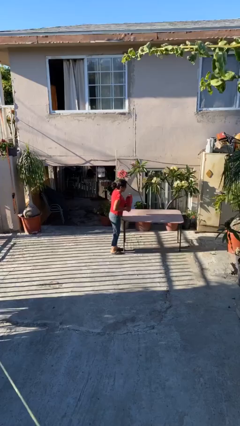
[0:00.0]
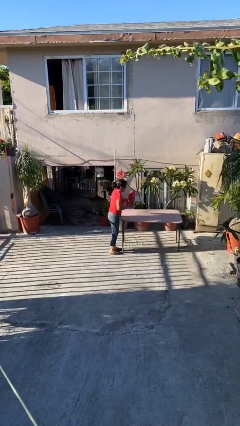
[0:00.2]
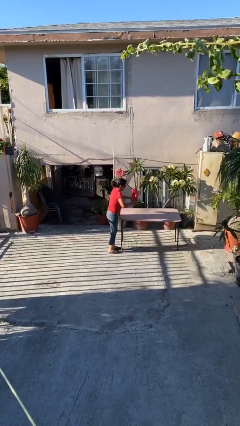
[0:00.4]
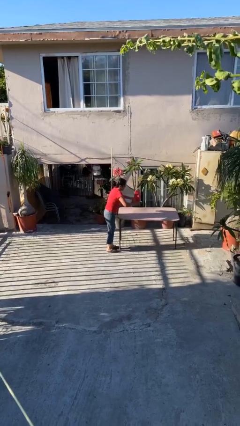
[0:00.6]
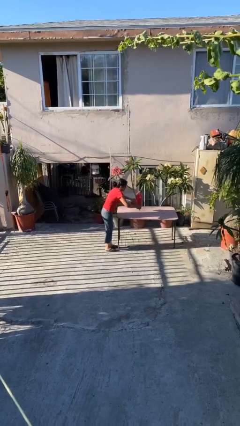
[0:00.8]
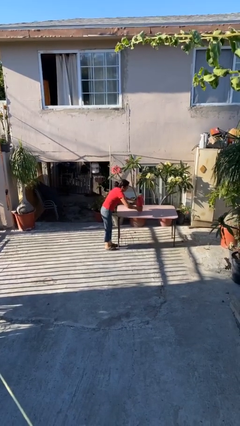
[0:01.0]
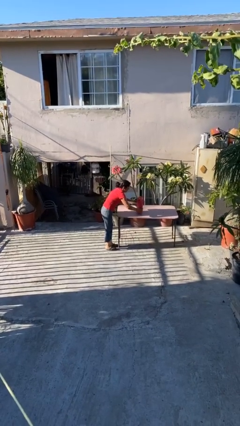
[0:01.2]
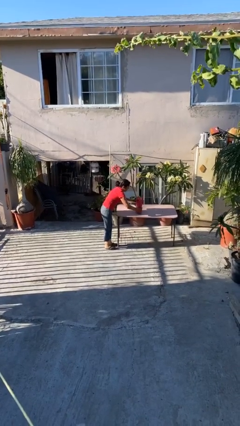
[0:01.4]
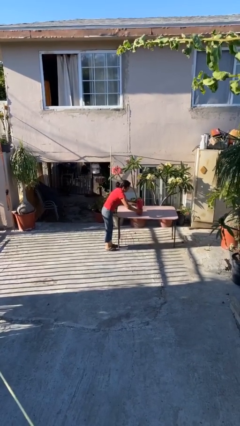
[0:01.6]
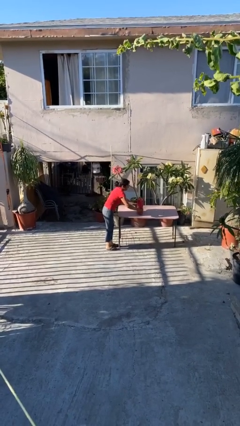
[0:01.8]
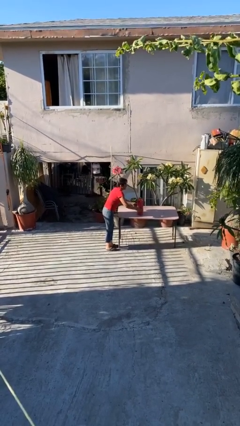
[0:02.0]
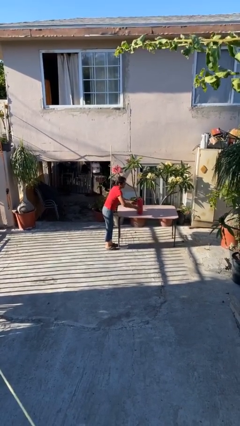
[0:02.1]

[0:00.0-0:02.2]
person puts down object on table

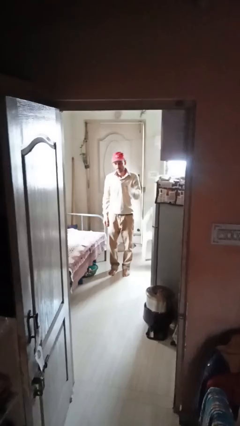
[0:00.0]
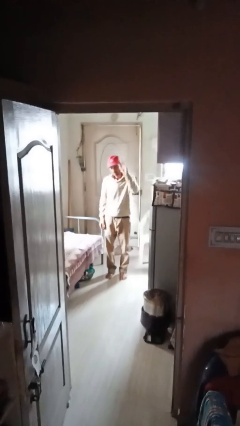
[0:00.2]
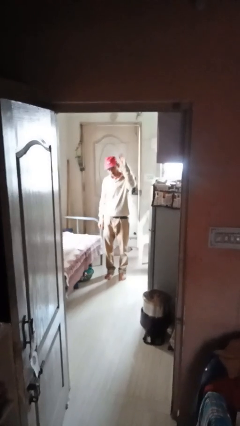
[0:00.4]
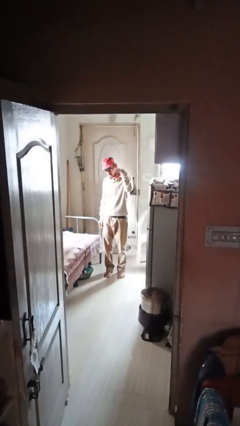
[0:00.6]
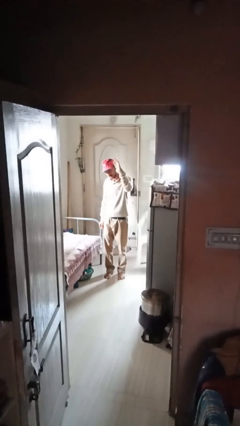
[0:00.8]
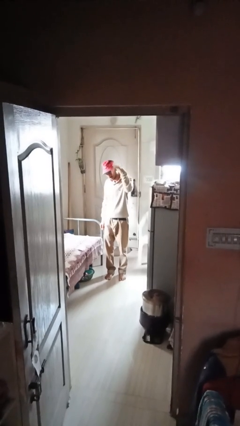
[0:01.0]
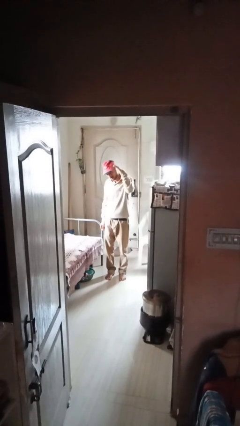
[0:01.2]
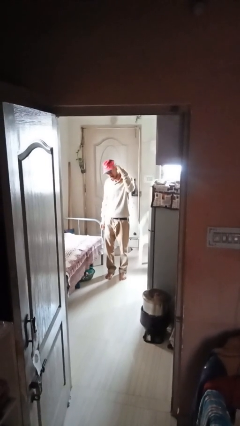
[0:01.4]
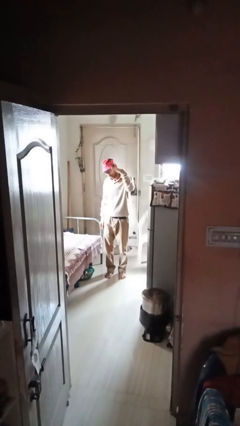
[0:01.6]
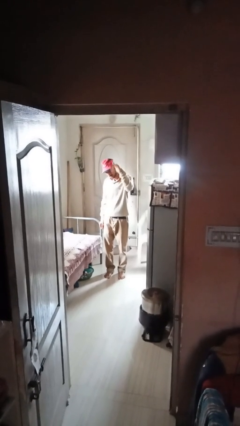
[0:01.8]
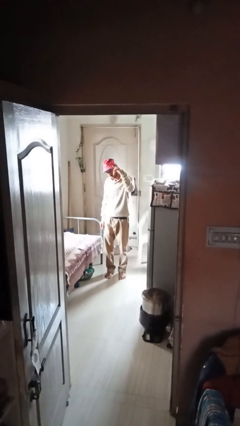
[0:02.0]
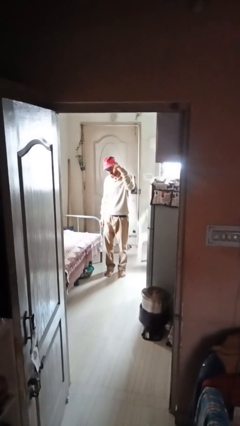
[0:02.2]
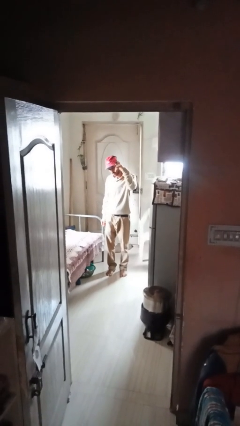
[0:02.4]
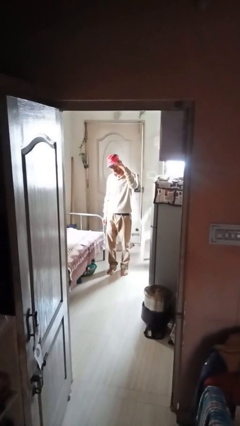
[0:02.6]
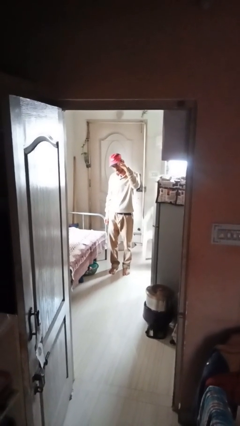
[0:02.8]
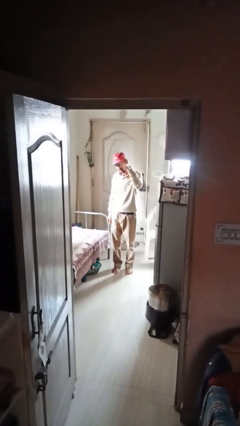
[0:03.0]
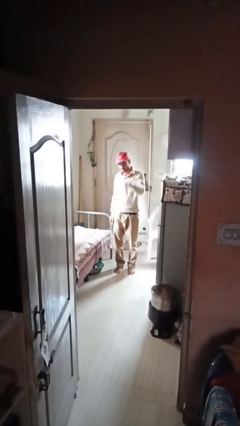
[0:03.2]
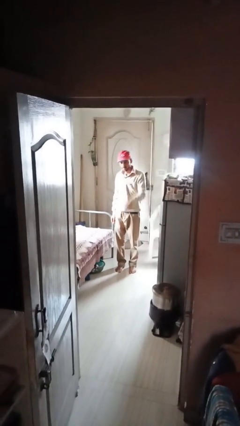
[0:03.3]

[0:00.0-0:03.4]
person gestures come here

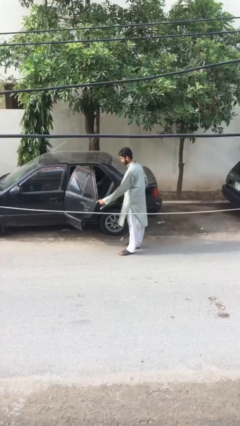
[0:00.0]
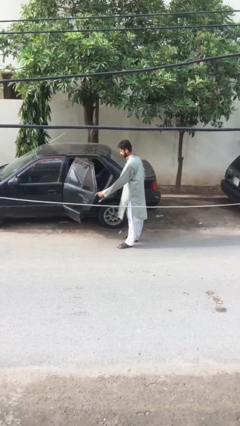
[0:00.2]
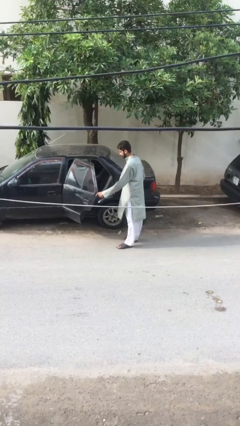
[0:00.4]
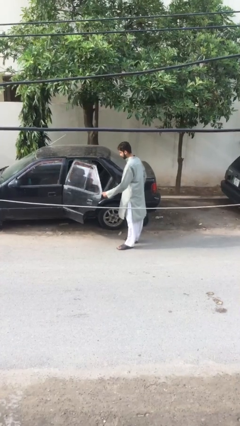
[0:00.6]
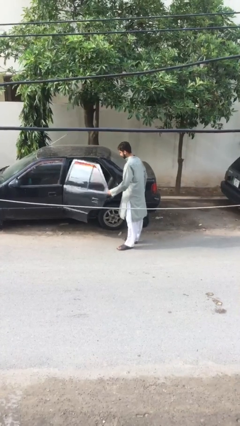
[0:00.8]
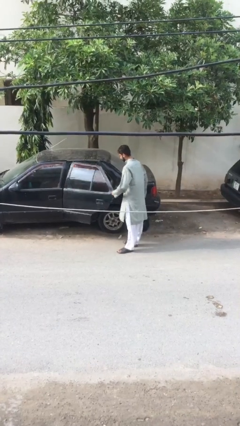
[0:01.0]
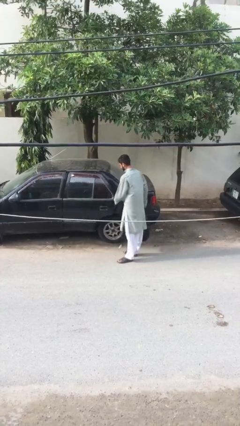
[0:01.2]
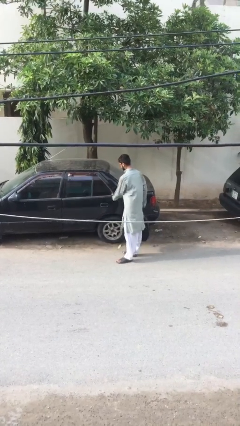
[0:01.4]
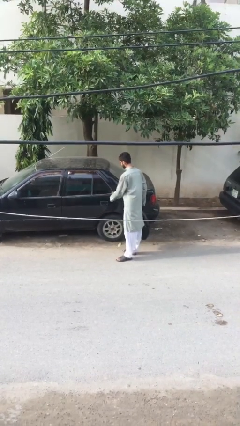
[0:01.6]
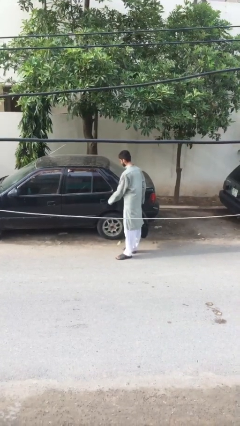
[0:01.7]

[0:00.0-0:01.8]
person closes car door

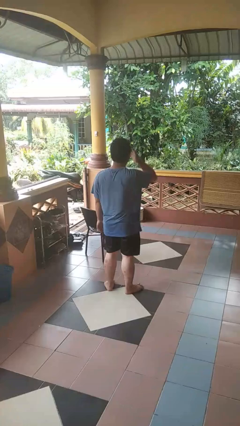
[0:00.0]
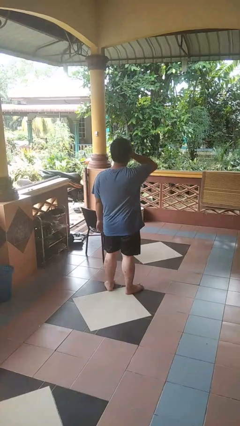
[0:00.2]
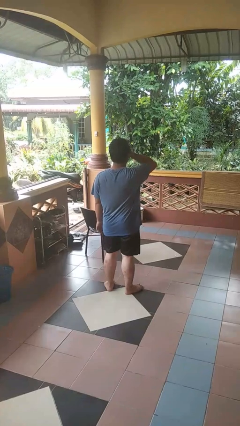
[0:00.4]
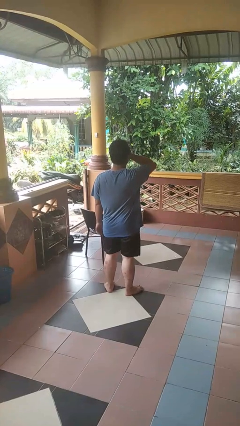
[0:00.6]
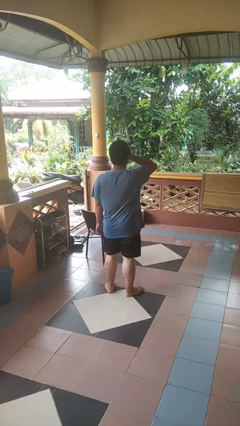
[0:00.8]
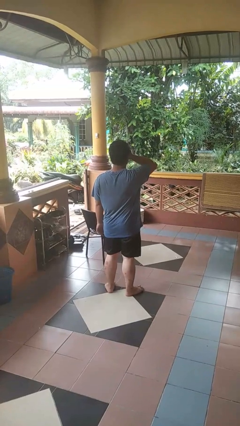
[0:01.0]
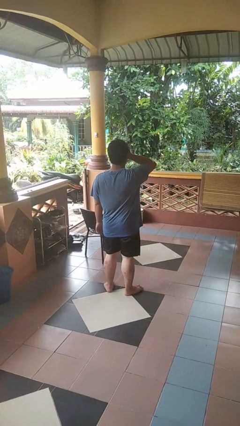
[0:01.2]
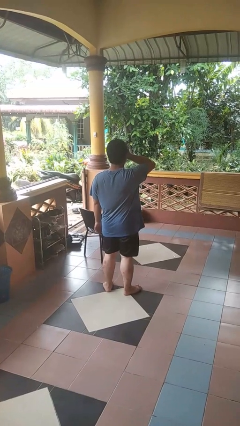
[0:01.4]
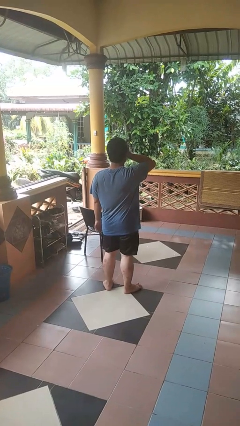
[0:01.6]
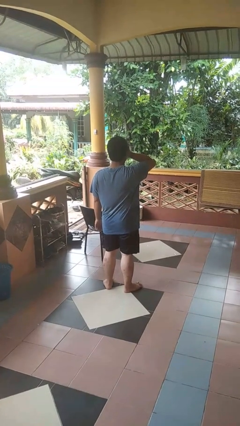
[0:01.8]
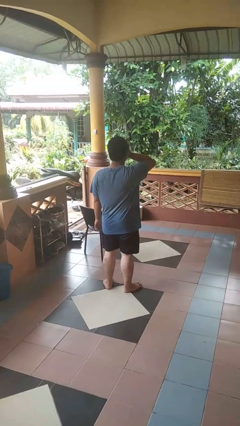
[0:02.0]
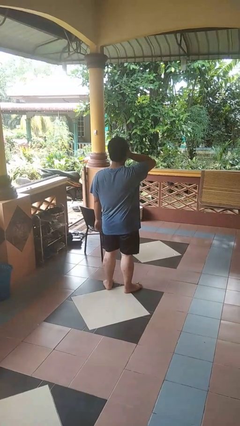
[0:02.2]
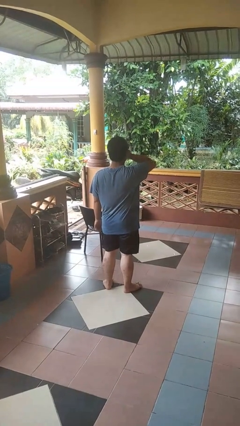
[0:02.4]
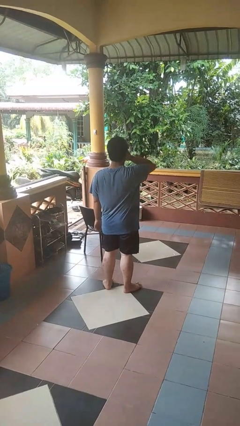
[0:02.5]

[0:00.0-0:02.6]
person rubs eyes

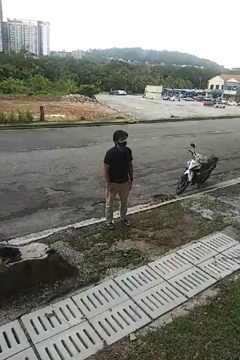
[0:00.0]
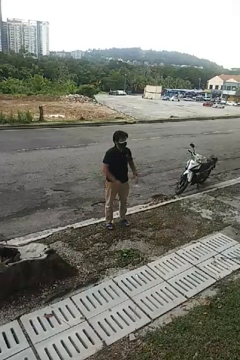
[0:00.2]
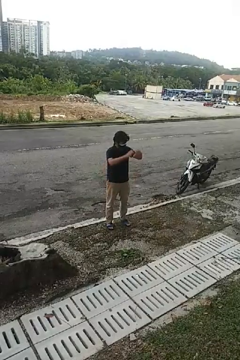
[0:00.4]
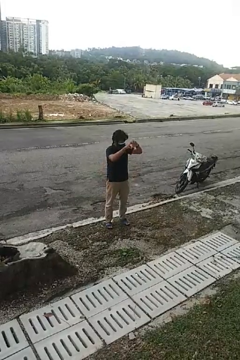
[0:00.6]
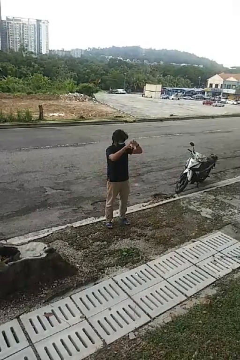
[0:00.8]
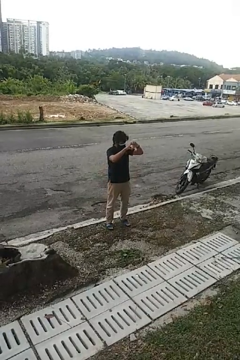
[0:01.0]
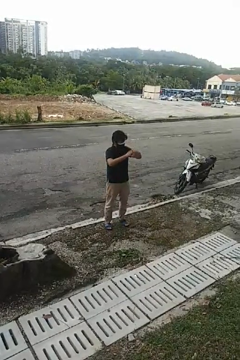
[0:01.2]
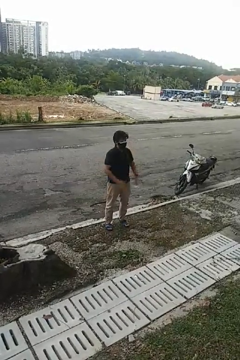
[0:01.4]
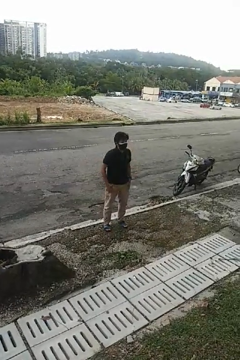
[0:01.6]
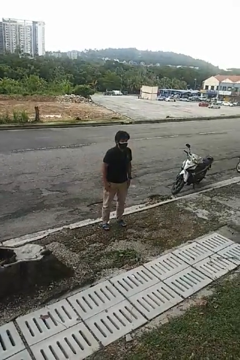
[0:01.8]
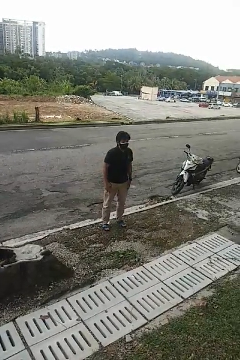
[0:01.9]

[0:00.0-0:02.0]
person gestures heart

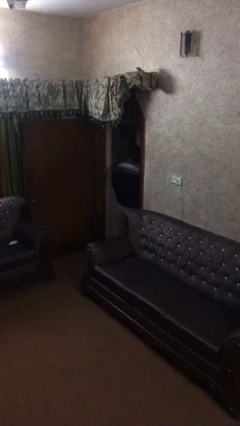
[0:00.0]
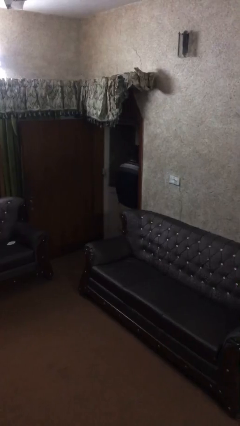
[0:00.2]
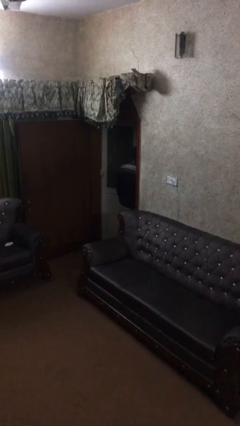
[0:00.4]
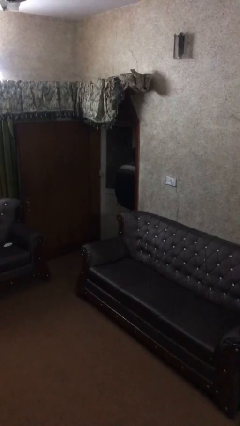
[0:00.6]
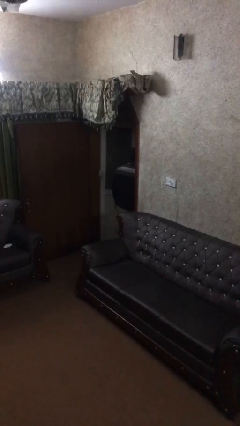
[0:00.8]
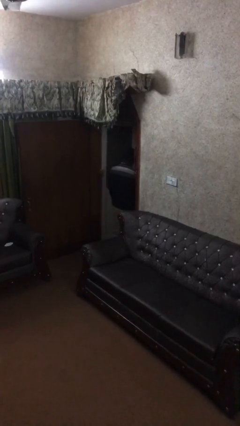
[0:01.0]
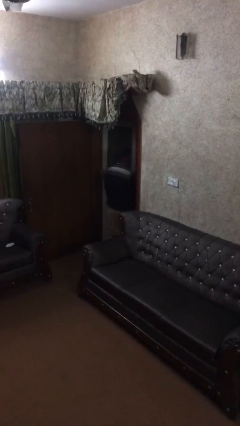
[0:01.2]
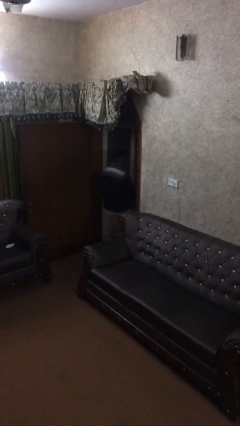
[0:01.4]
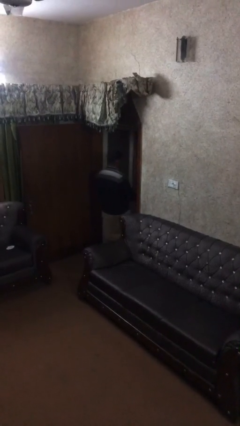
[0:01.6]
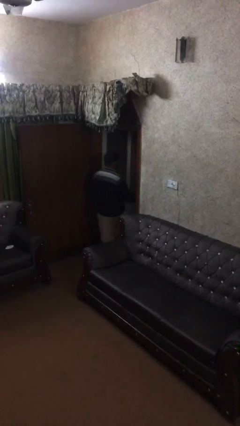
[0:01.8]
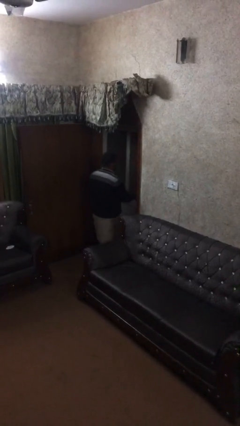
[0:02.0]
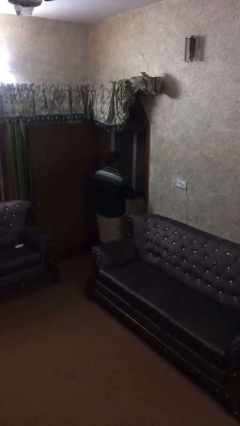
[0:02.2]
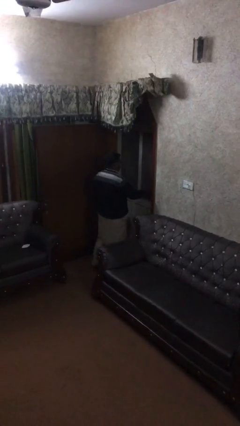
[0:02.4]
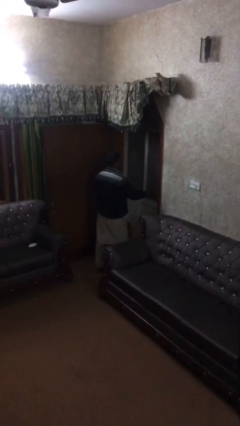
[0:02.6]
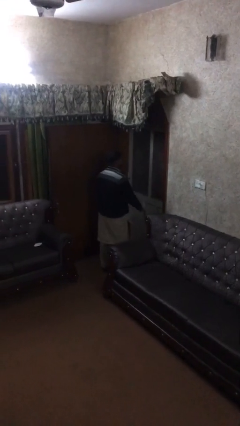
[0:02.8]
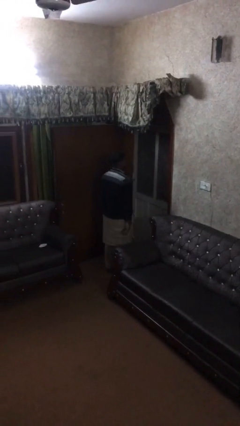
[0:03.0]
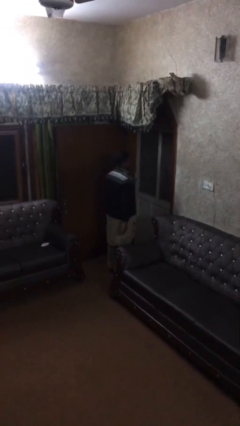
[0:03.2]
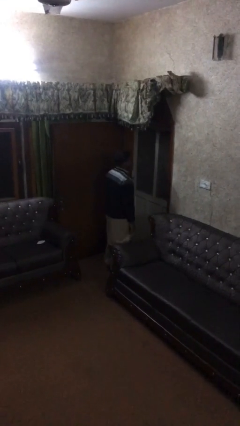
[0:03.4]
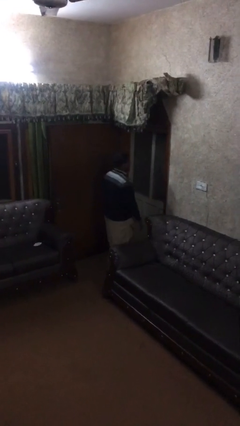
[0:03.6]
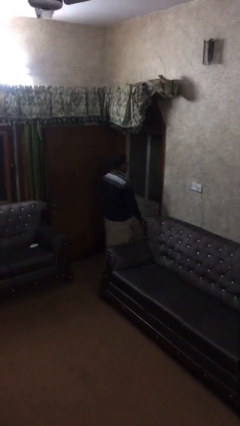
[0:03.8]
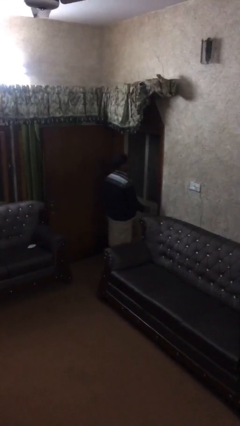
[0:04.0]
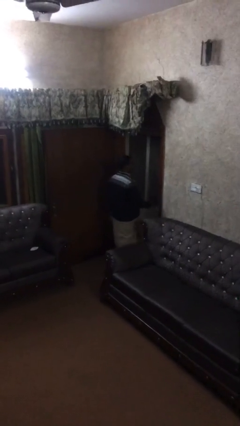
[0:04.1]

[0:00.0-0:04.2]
person closes facility door

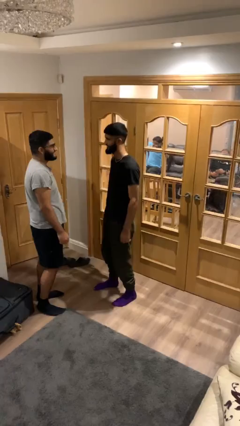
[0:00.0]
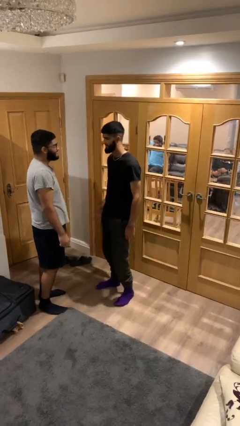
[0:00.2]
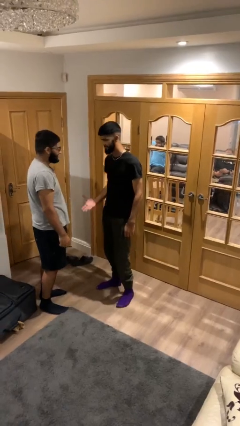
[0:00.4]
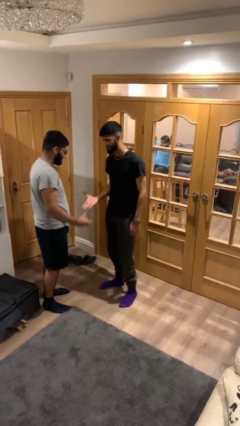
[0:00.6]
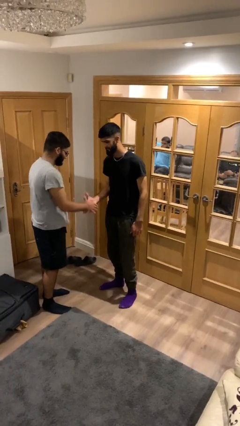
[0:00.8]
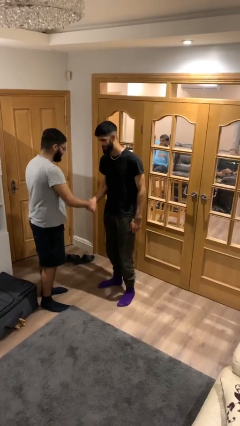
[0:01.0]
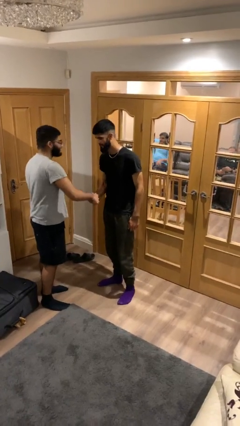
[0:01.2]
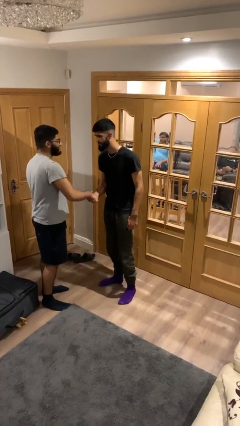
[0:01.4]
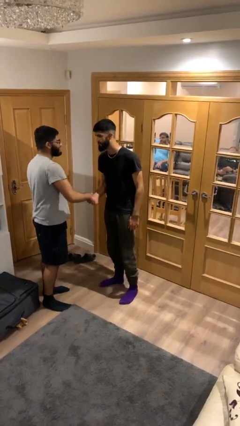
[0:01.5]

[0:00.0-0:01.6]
person shakes hand
